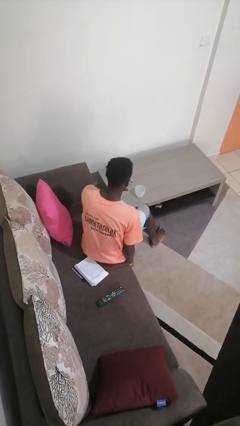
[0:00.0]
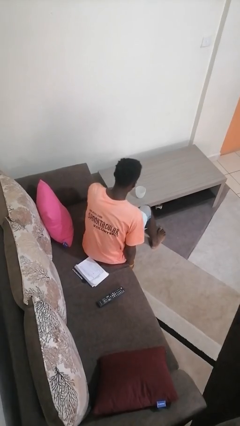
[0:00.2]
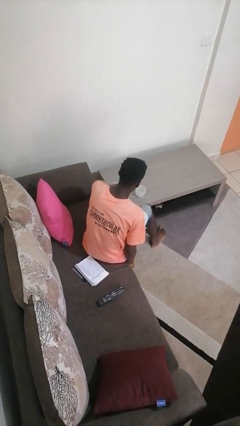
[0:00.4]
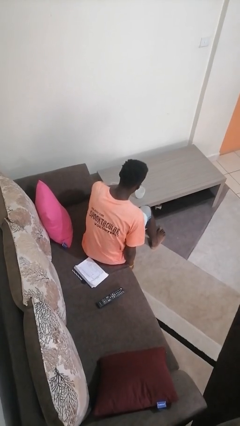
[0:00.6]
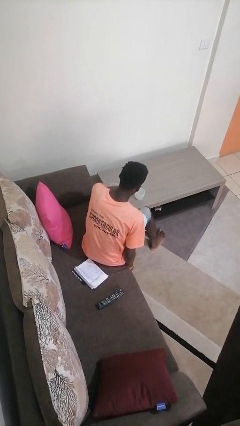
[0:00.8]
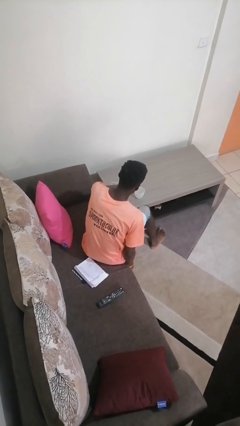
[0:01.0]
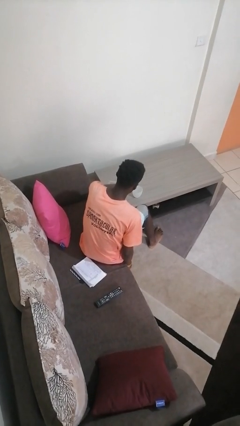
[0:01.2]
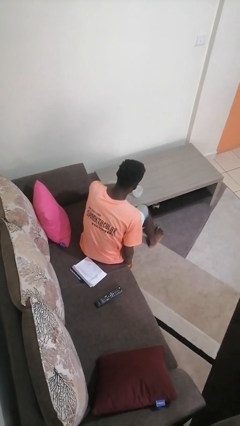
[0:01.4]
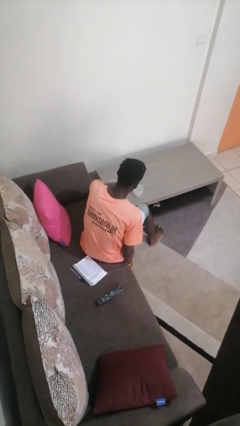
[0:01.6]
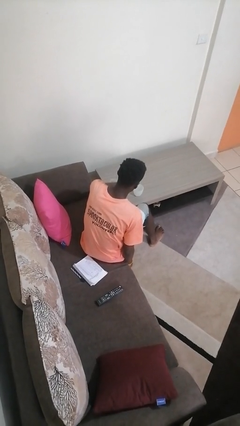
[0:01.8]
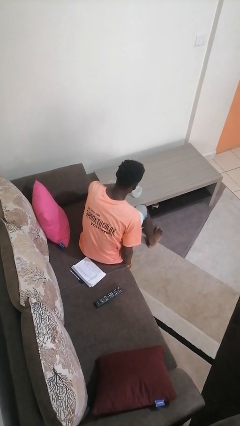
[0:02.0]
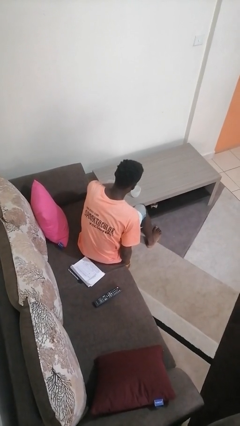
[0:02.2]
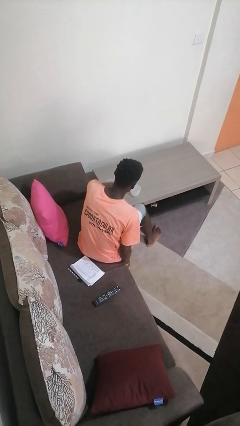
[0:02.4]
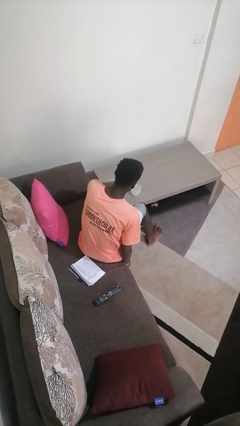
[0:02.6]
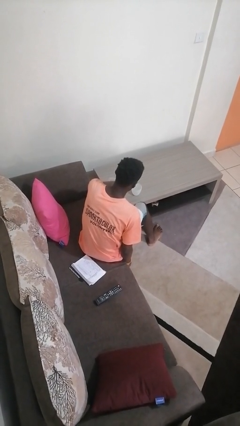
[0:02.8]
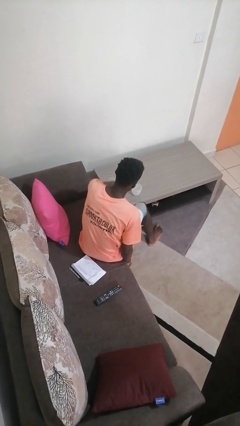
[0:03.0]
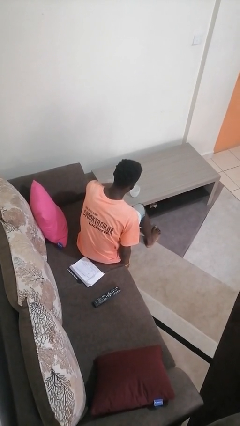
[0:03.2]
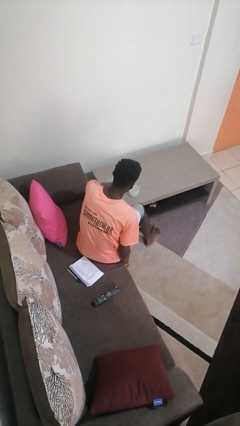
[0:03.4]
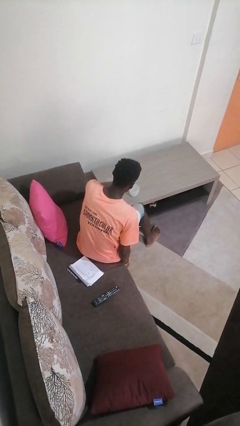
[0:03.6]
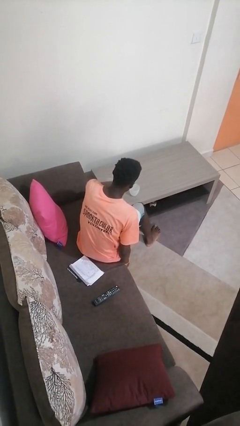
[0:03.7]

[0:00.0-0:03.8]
person pours liquid into cup

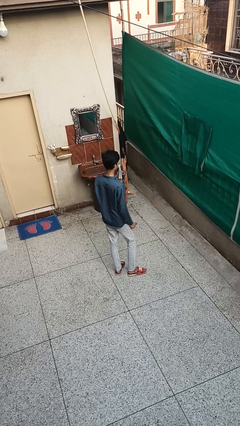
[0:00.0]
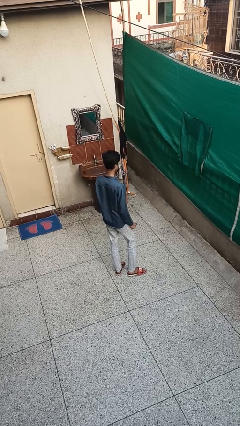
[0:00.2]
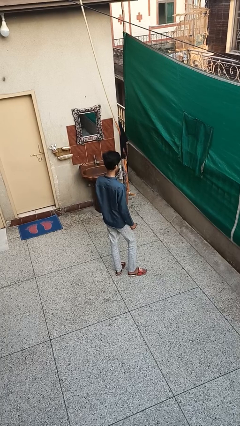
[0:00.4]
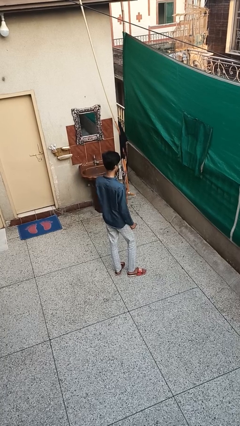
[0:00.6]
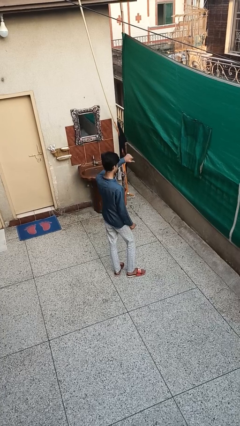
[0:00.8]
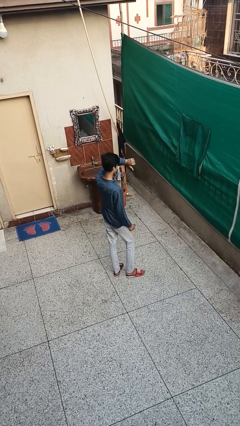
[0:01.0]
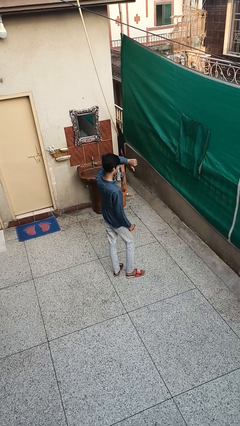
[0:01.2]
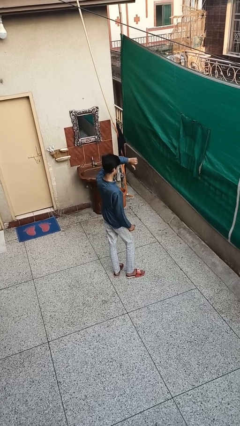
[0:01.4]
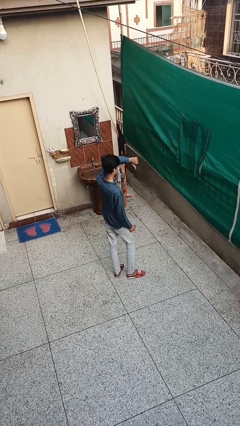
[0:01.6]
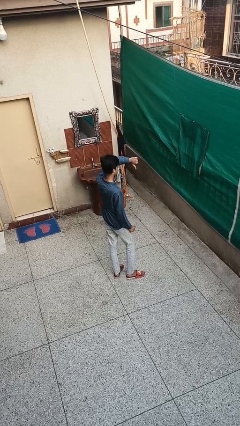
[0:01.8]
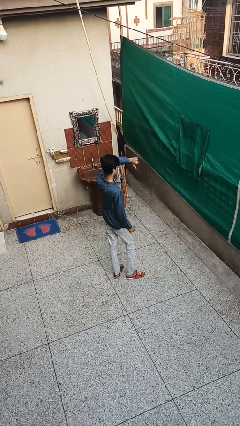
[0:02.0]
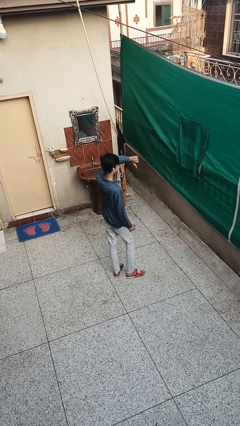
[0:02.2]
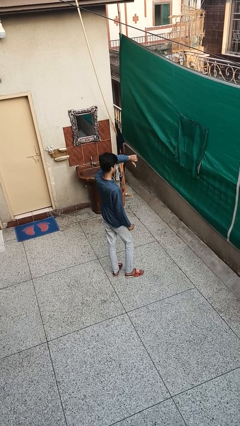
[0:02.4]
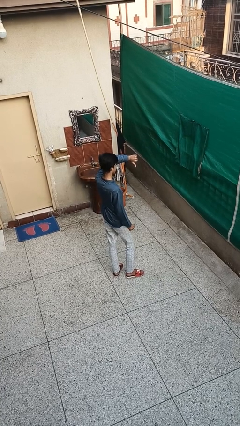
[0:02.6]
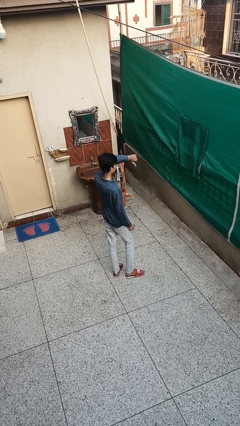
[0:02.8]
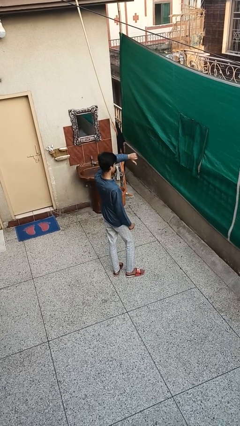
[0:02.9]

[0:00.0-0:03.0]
person gestures thumbs down

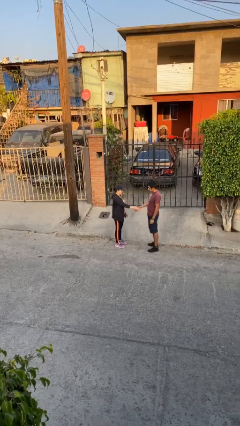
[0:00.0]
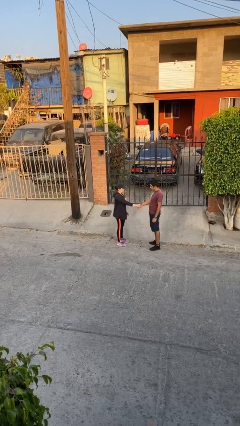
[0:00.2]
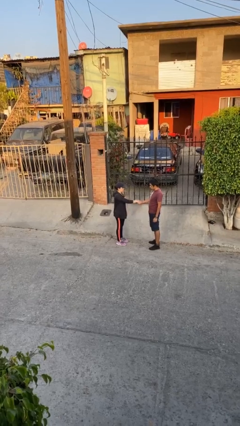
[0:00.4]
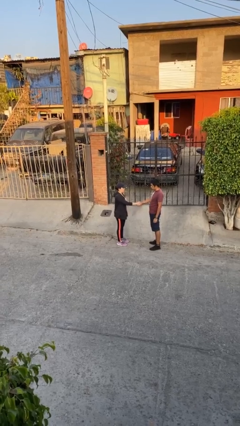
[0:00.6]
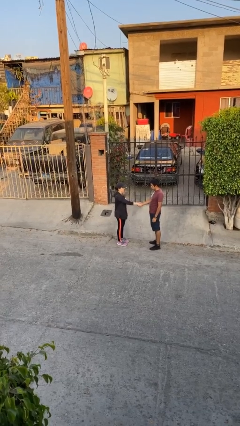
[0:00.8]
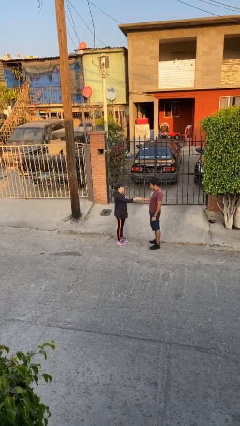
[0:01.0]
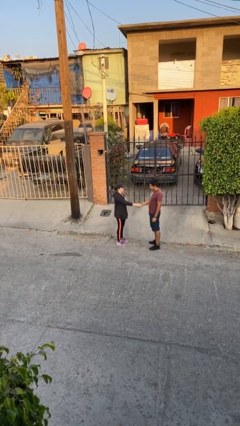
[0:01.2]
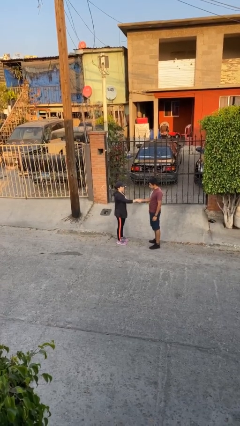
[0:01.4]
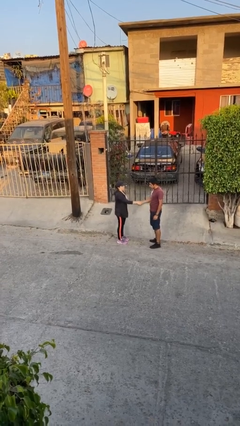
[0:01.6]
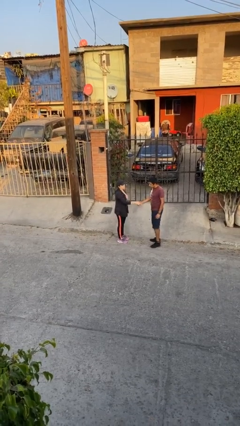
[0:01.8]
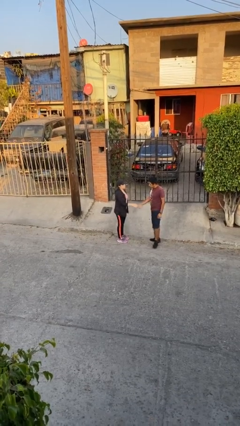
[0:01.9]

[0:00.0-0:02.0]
person shakes hand

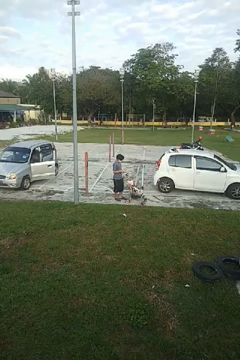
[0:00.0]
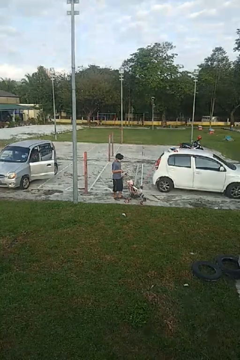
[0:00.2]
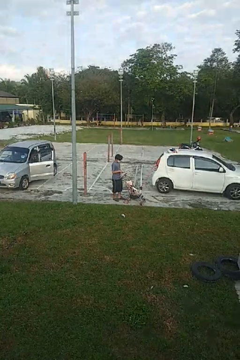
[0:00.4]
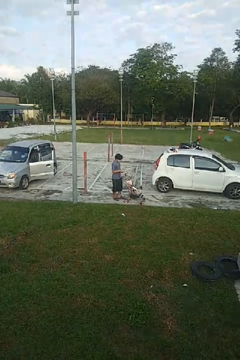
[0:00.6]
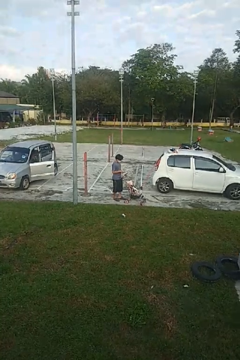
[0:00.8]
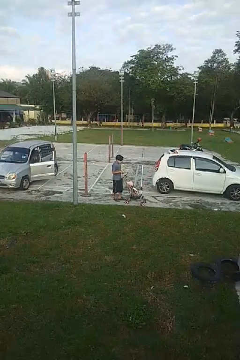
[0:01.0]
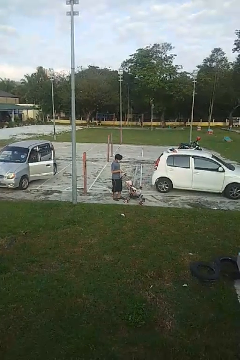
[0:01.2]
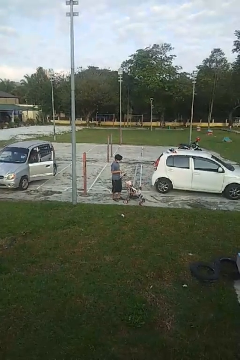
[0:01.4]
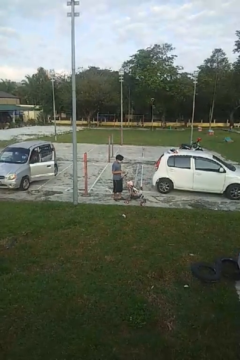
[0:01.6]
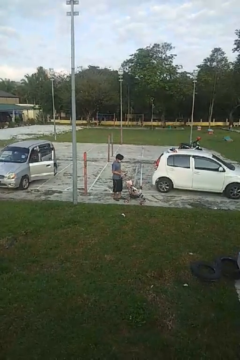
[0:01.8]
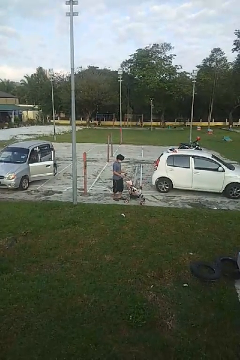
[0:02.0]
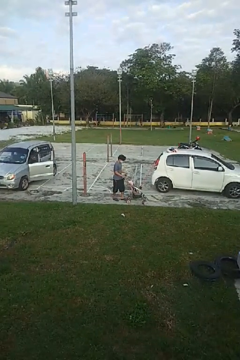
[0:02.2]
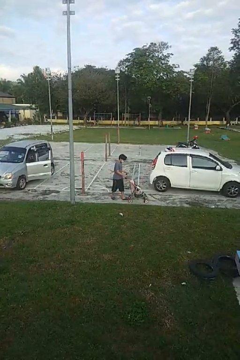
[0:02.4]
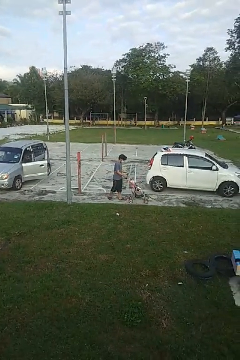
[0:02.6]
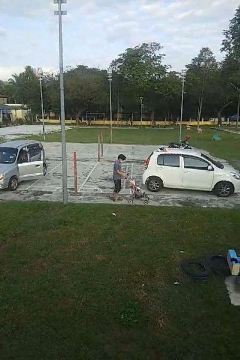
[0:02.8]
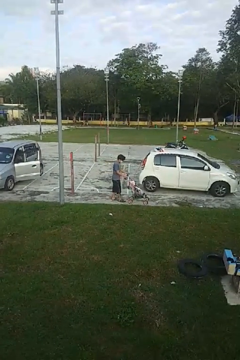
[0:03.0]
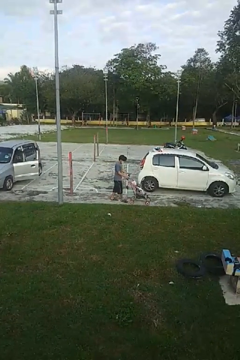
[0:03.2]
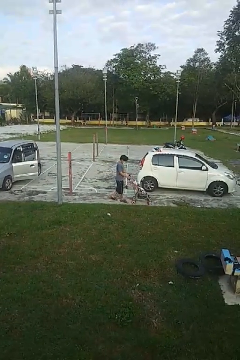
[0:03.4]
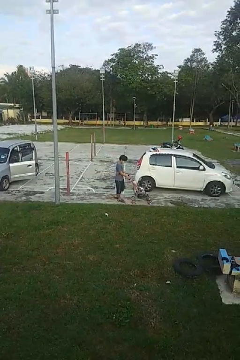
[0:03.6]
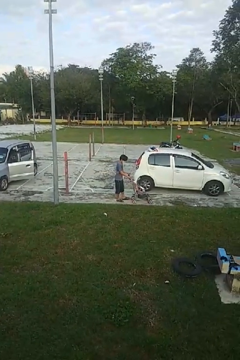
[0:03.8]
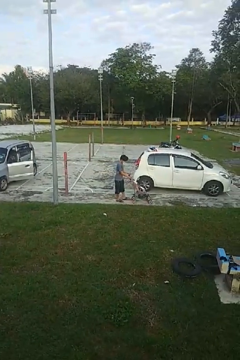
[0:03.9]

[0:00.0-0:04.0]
person pushes wheeled cart

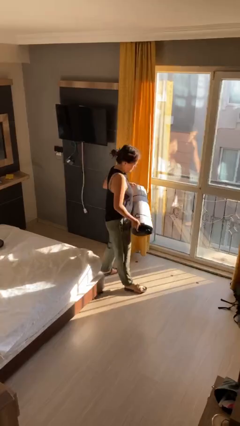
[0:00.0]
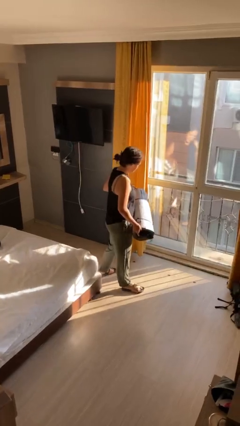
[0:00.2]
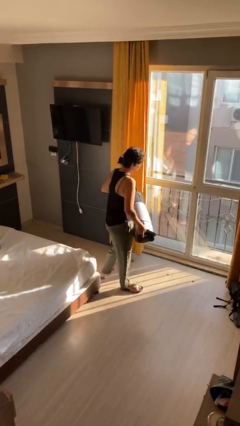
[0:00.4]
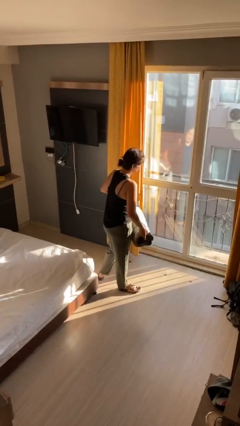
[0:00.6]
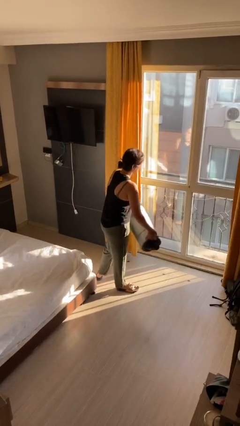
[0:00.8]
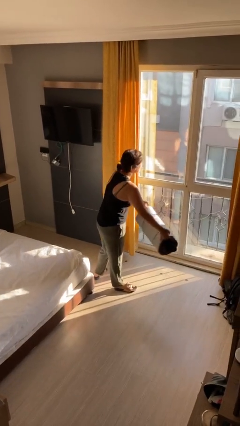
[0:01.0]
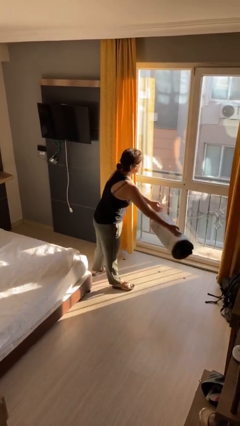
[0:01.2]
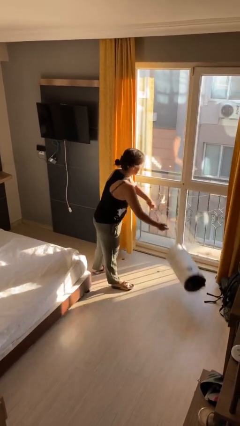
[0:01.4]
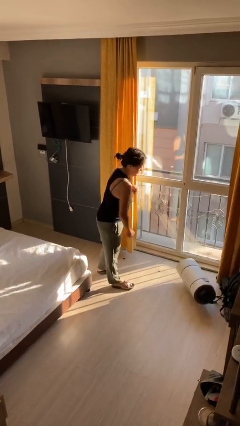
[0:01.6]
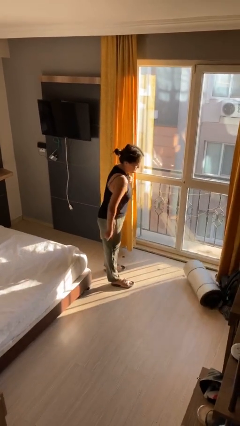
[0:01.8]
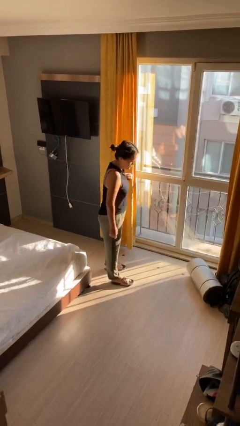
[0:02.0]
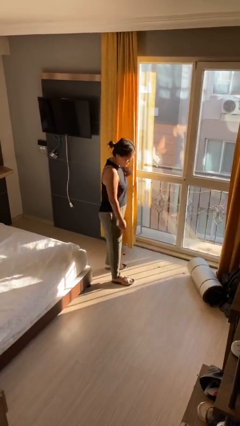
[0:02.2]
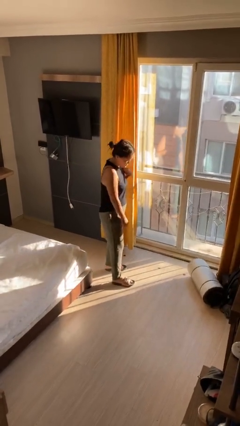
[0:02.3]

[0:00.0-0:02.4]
person throws object to ground

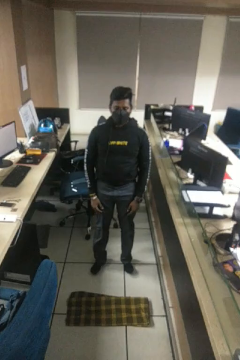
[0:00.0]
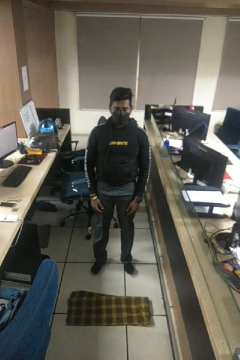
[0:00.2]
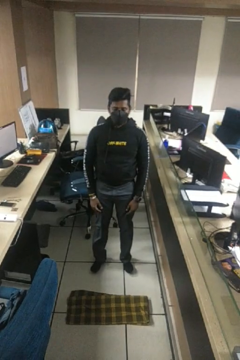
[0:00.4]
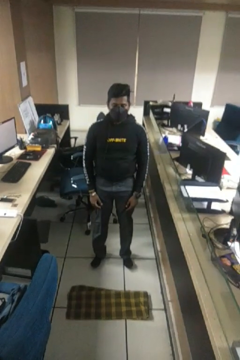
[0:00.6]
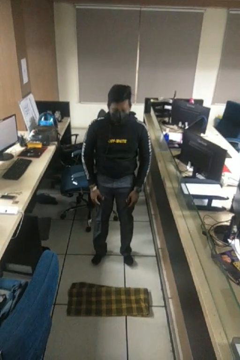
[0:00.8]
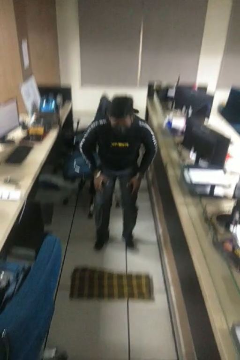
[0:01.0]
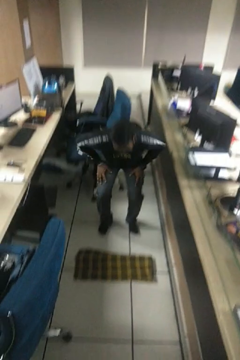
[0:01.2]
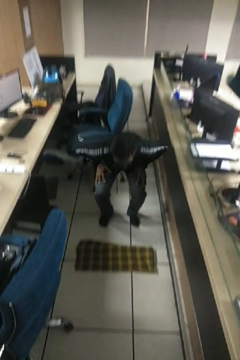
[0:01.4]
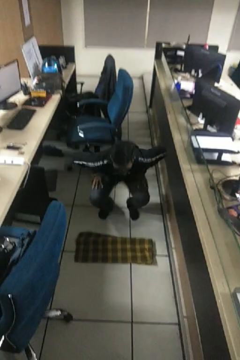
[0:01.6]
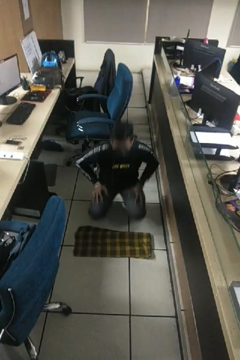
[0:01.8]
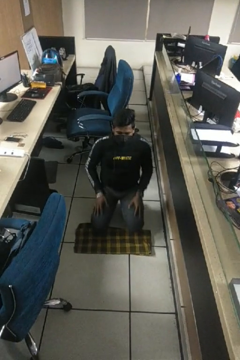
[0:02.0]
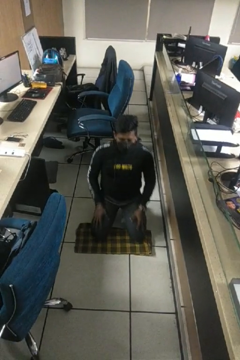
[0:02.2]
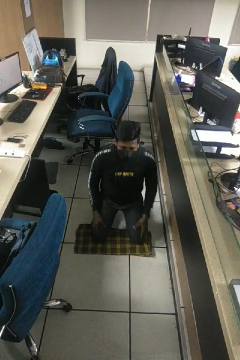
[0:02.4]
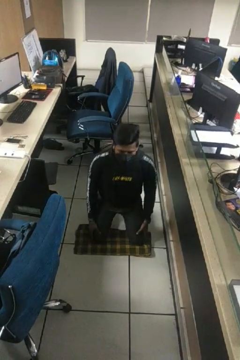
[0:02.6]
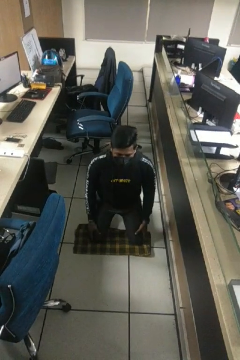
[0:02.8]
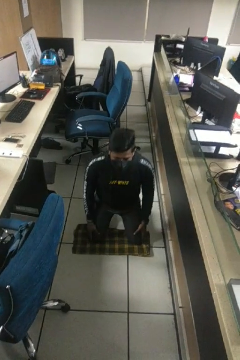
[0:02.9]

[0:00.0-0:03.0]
person kneels
